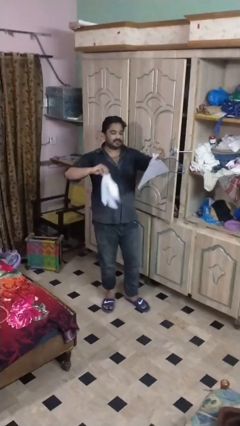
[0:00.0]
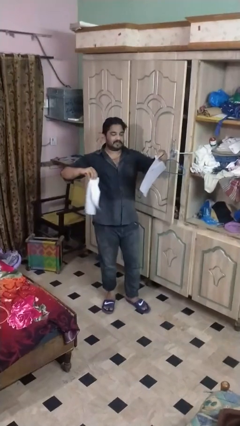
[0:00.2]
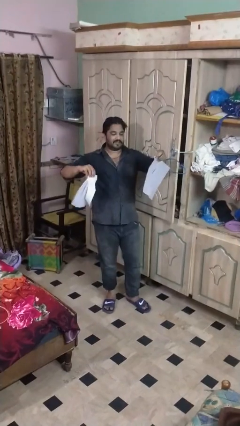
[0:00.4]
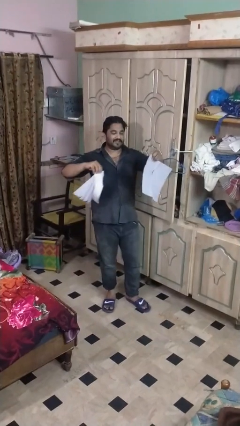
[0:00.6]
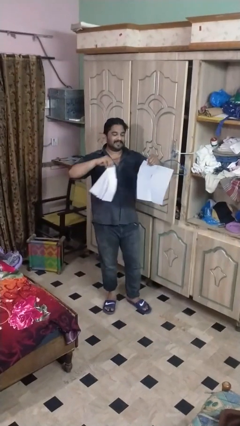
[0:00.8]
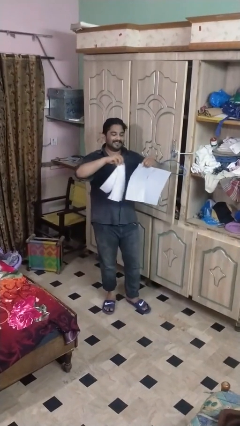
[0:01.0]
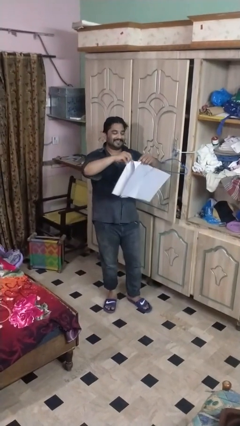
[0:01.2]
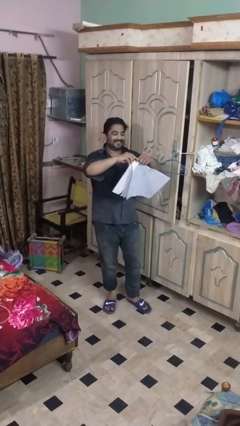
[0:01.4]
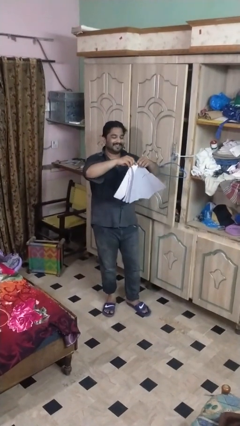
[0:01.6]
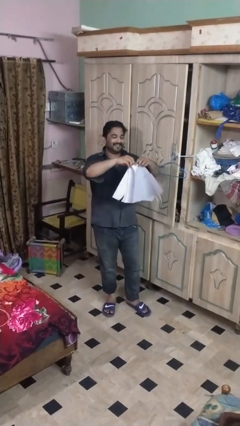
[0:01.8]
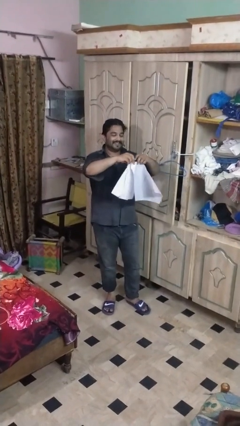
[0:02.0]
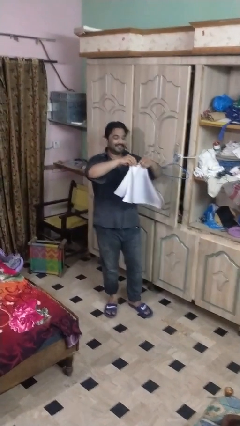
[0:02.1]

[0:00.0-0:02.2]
person tears paper

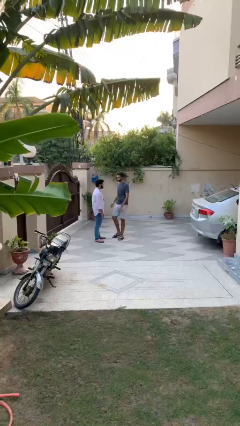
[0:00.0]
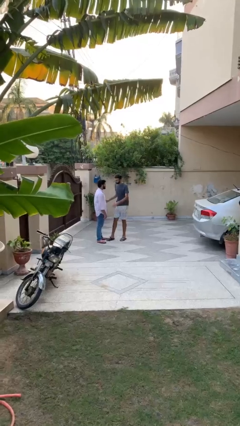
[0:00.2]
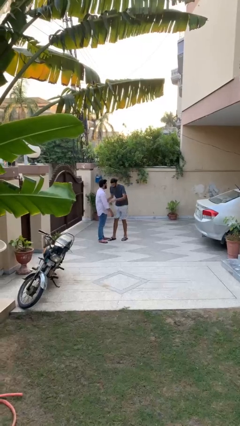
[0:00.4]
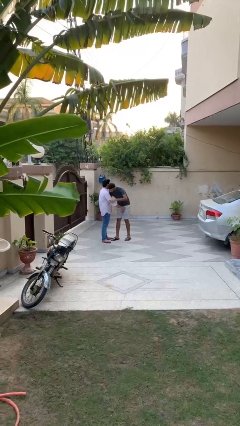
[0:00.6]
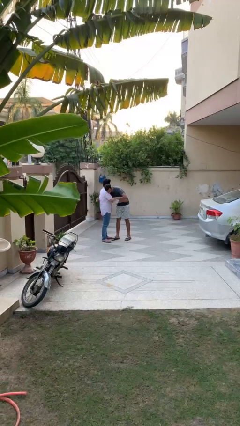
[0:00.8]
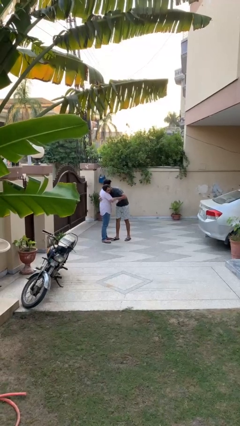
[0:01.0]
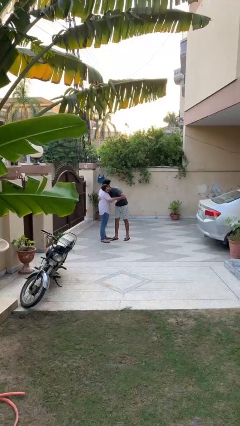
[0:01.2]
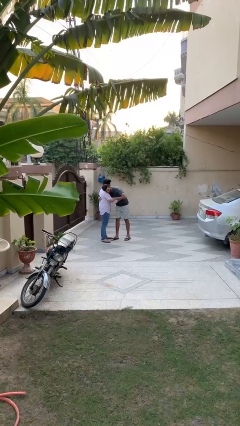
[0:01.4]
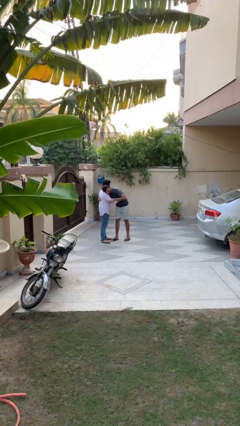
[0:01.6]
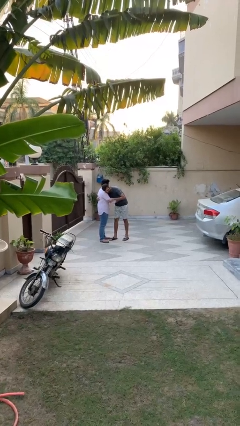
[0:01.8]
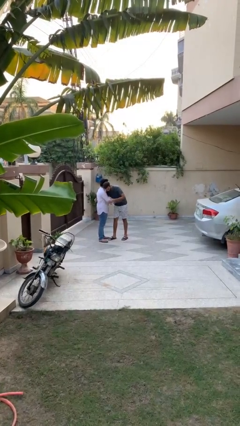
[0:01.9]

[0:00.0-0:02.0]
person embraces person

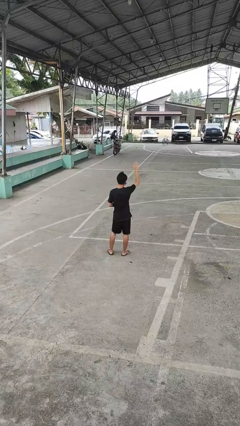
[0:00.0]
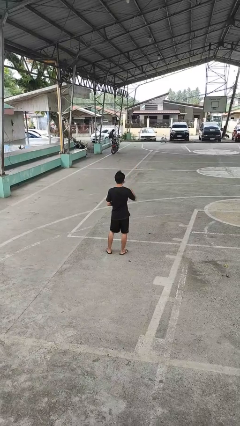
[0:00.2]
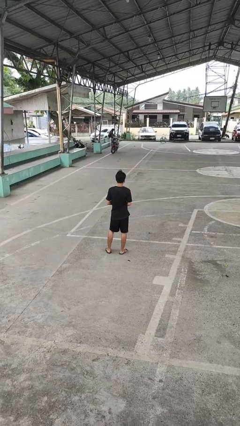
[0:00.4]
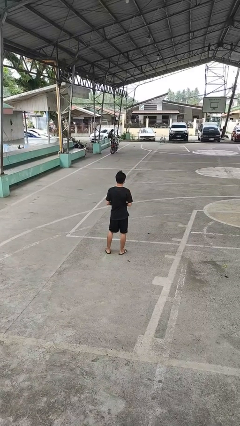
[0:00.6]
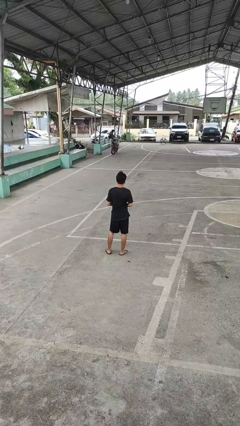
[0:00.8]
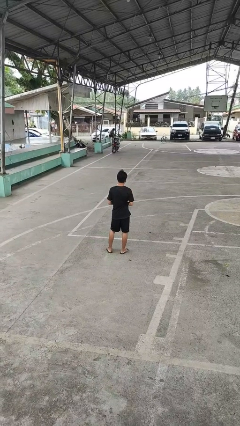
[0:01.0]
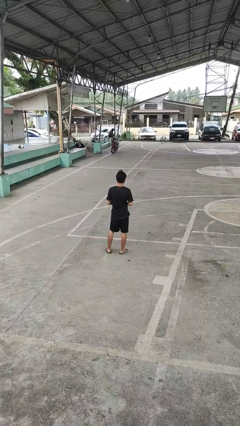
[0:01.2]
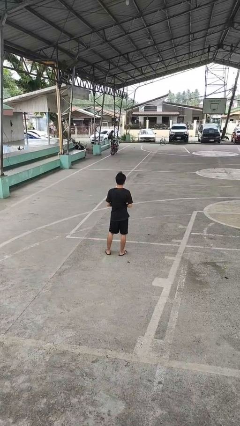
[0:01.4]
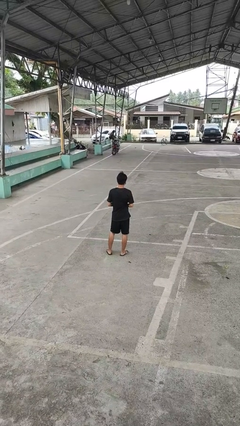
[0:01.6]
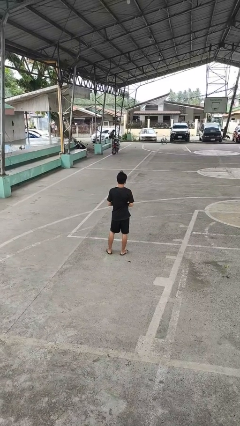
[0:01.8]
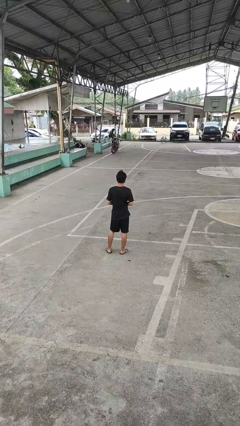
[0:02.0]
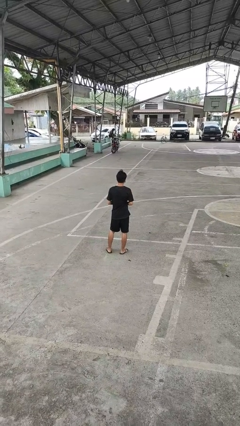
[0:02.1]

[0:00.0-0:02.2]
person gestures lower hand

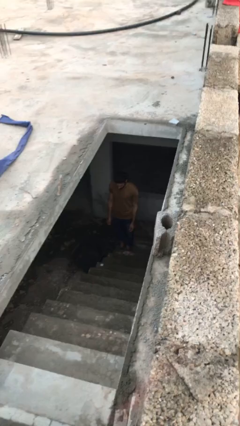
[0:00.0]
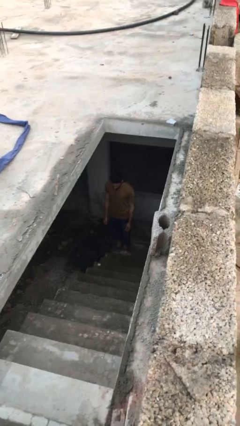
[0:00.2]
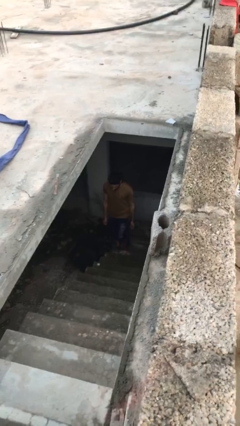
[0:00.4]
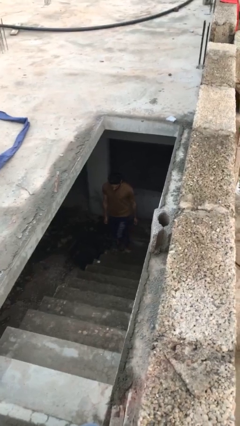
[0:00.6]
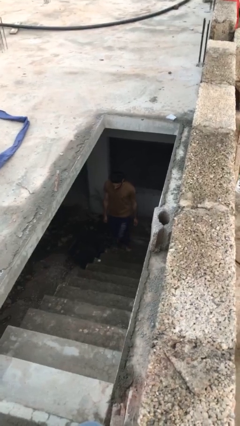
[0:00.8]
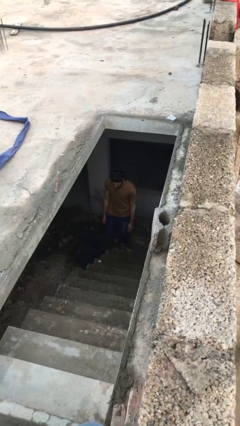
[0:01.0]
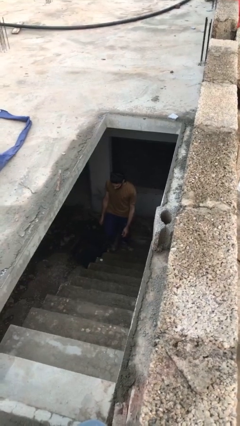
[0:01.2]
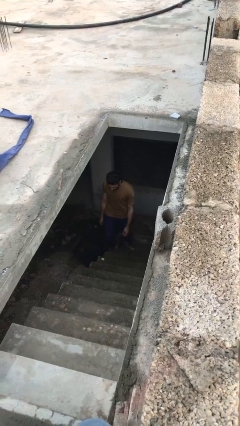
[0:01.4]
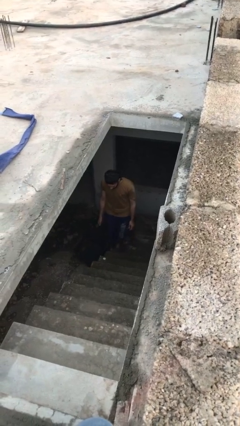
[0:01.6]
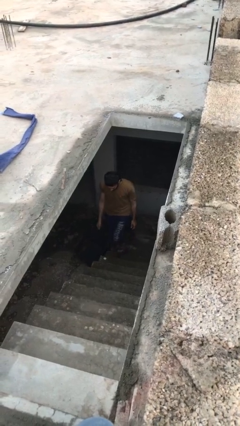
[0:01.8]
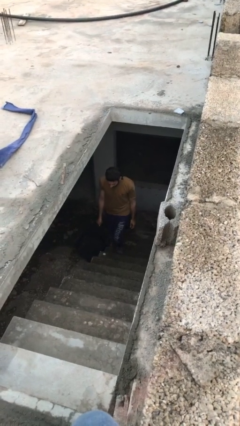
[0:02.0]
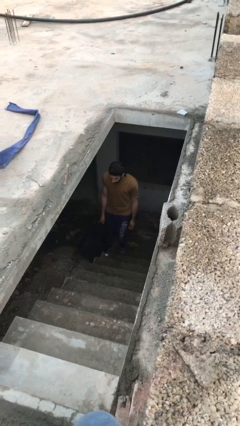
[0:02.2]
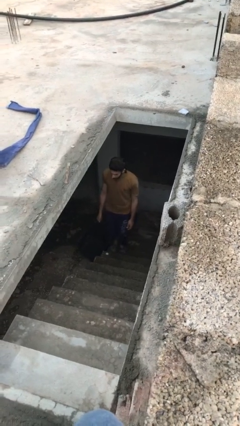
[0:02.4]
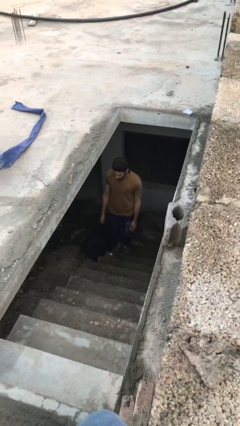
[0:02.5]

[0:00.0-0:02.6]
person climbs up stairs

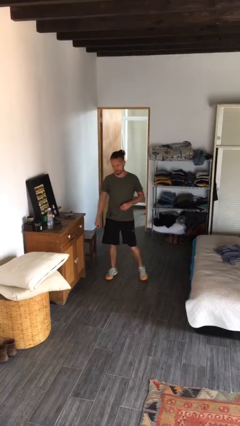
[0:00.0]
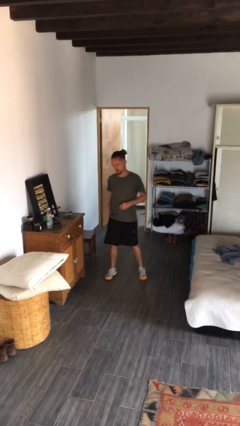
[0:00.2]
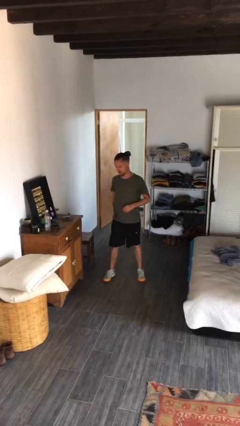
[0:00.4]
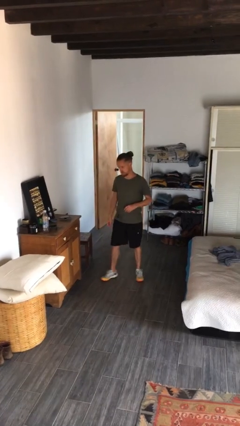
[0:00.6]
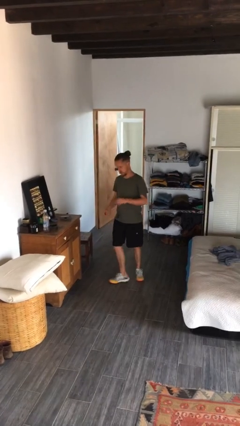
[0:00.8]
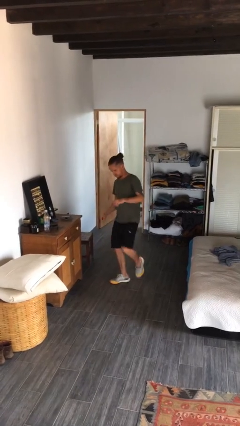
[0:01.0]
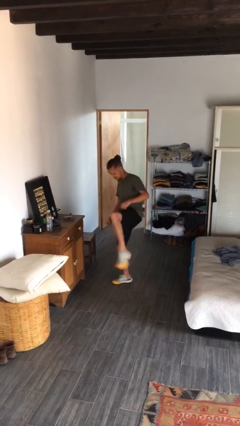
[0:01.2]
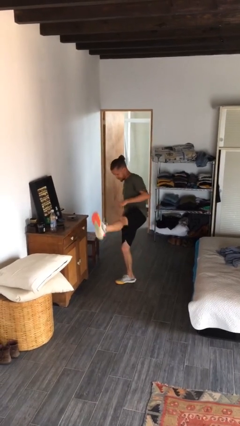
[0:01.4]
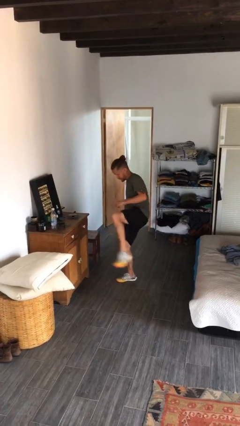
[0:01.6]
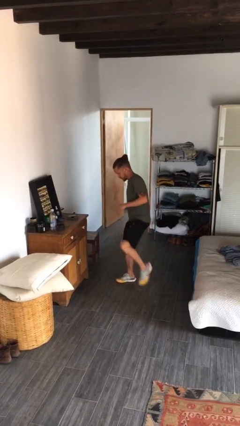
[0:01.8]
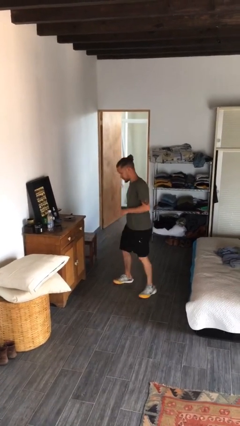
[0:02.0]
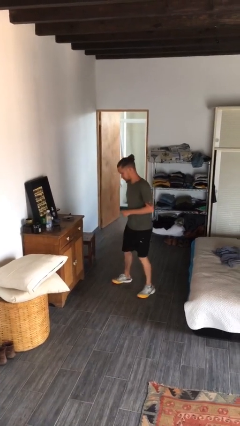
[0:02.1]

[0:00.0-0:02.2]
person karate kicks

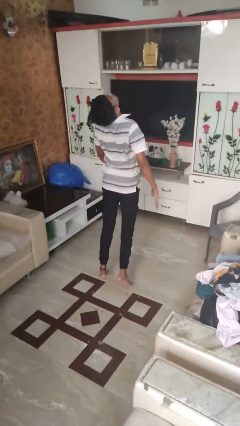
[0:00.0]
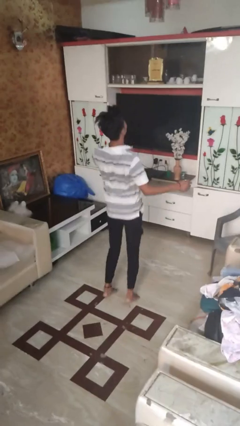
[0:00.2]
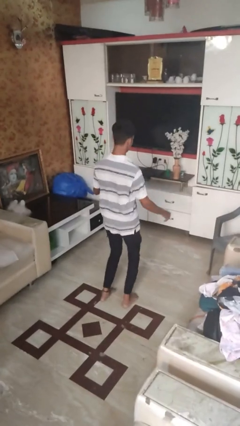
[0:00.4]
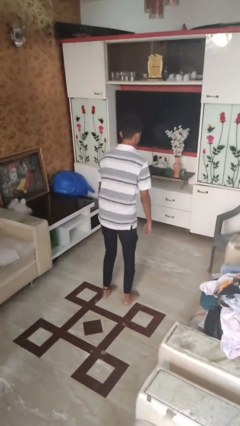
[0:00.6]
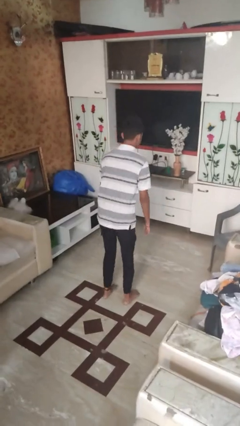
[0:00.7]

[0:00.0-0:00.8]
person somersaults

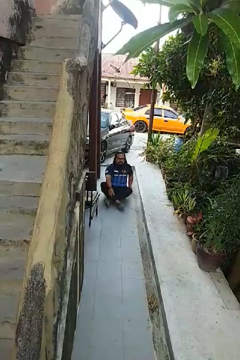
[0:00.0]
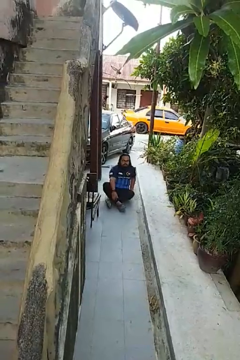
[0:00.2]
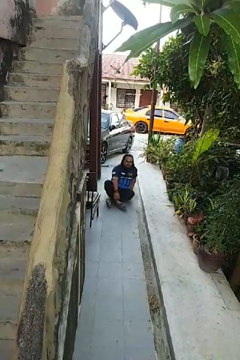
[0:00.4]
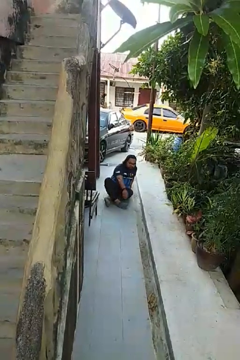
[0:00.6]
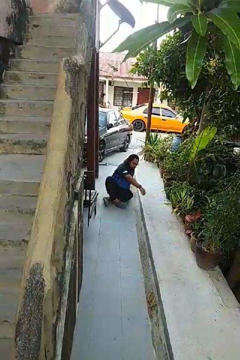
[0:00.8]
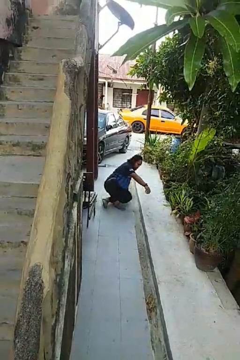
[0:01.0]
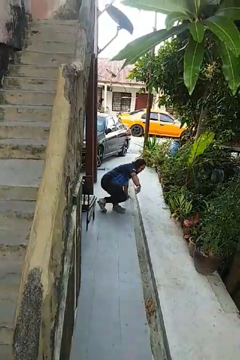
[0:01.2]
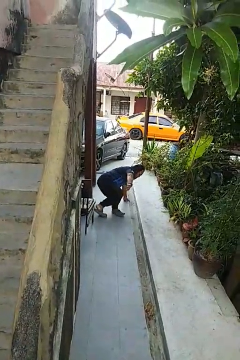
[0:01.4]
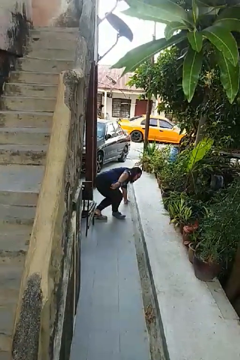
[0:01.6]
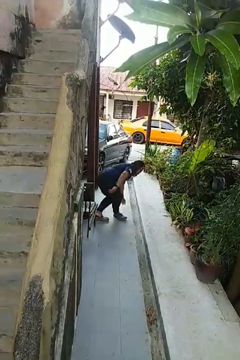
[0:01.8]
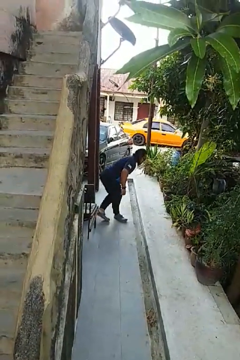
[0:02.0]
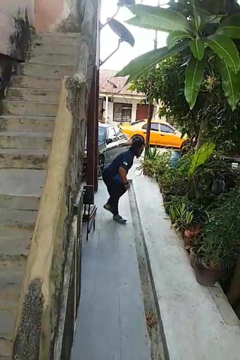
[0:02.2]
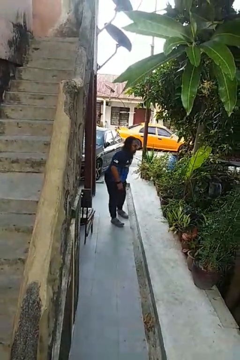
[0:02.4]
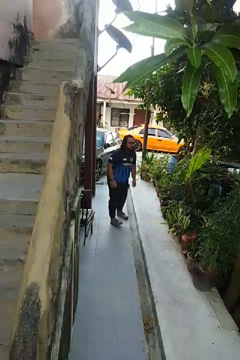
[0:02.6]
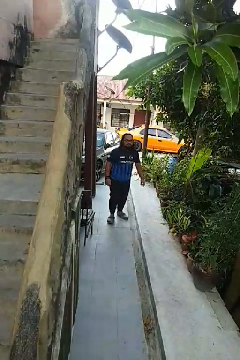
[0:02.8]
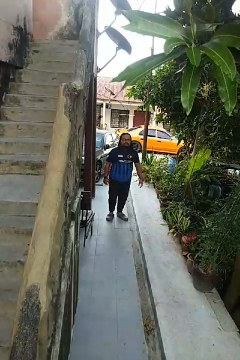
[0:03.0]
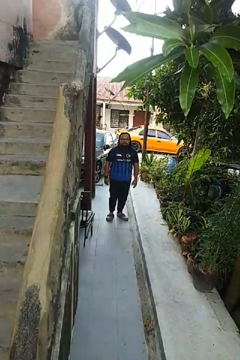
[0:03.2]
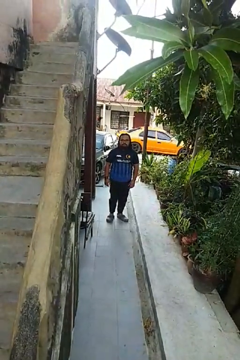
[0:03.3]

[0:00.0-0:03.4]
person stands up from floor

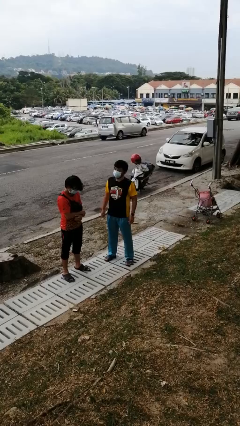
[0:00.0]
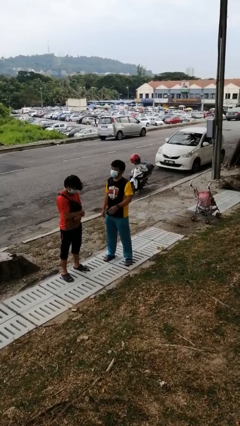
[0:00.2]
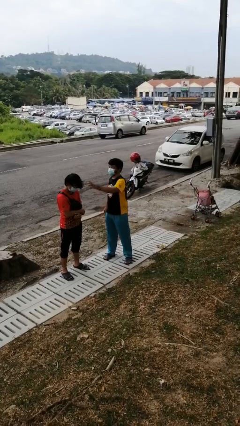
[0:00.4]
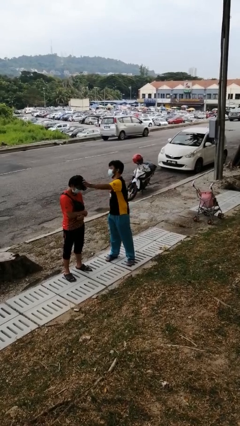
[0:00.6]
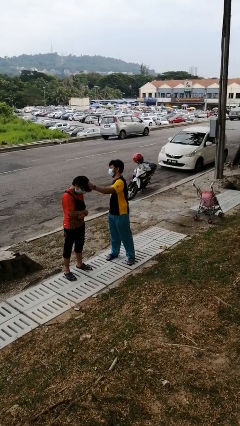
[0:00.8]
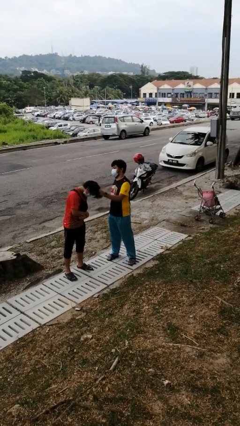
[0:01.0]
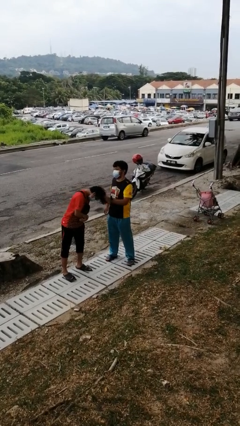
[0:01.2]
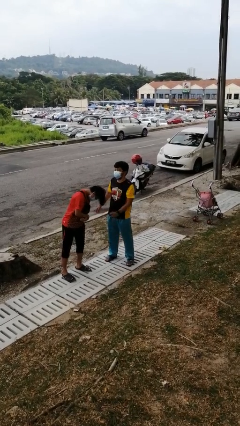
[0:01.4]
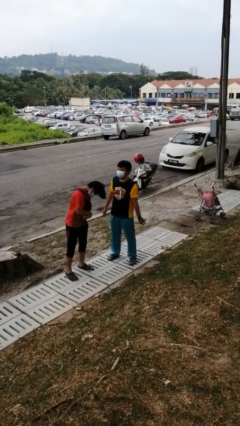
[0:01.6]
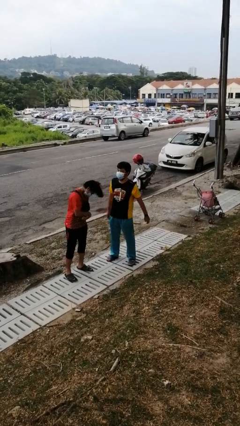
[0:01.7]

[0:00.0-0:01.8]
person grabs person by hair

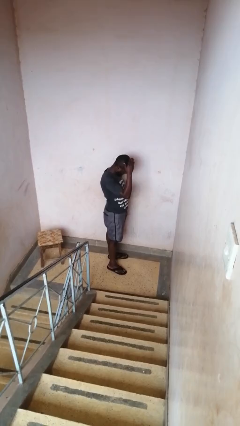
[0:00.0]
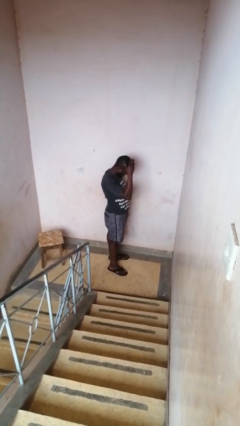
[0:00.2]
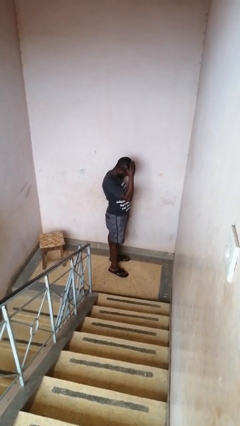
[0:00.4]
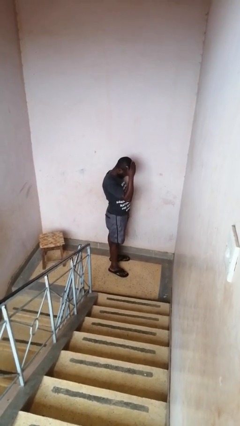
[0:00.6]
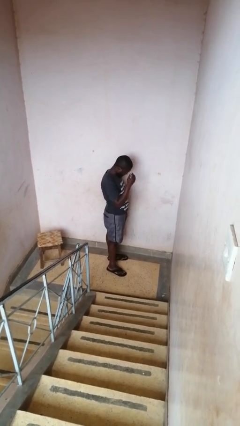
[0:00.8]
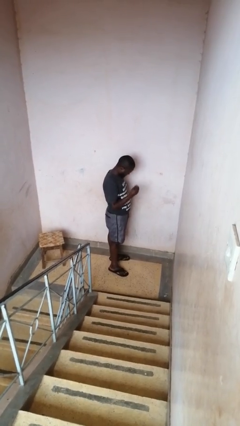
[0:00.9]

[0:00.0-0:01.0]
person pats head
